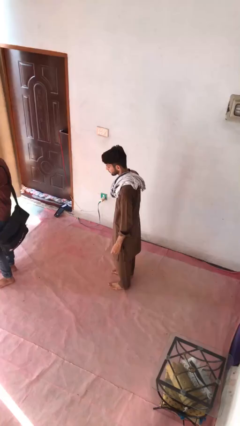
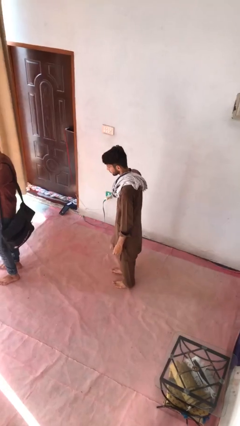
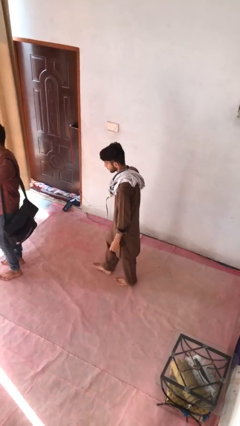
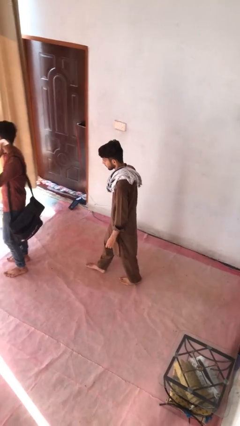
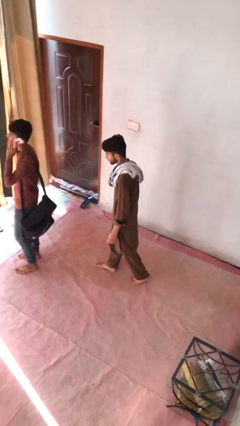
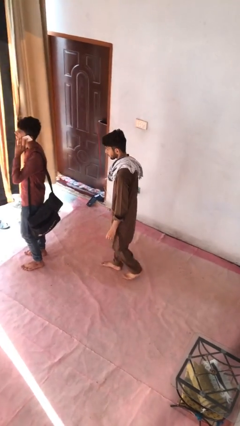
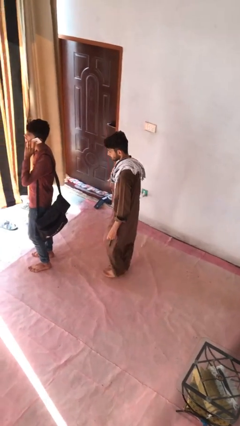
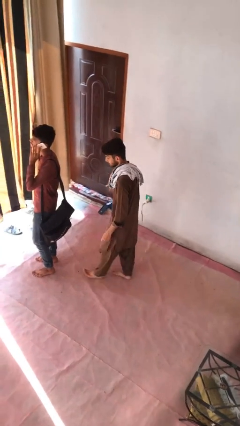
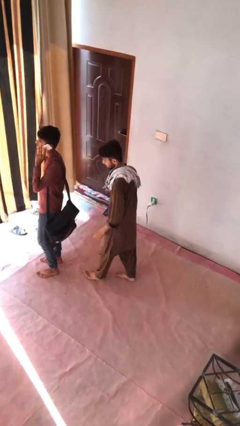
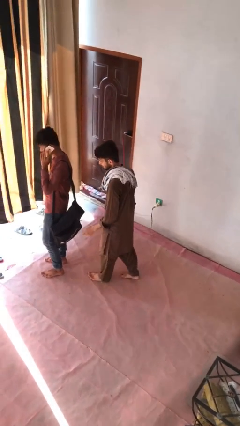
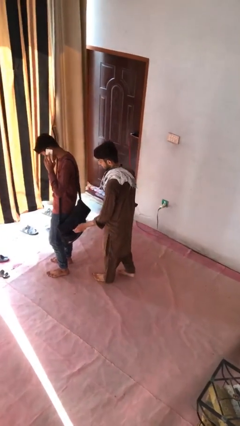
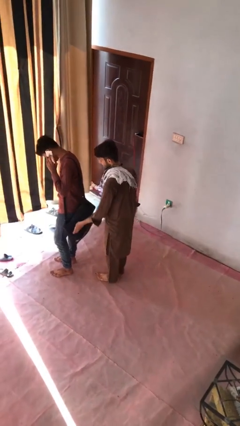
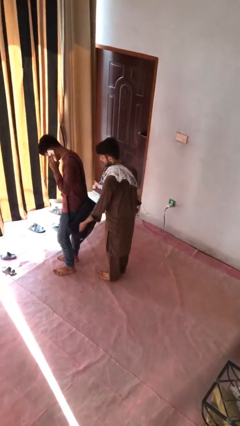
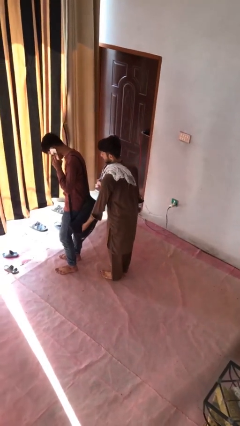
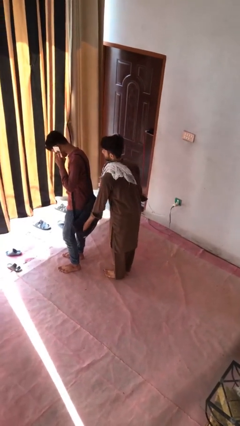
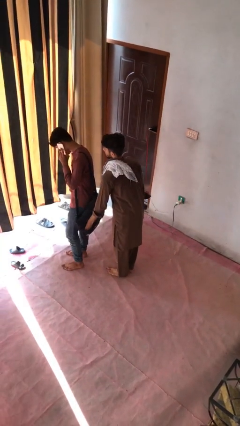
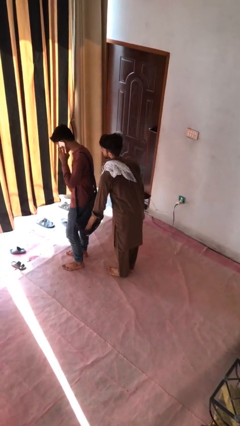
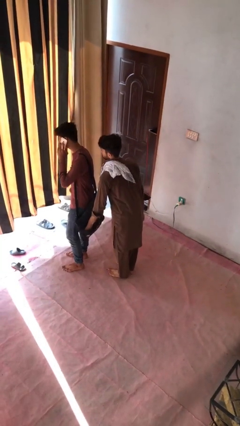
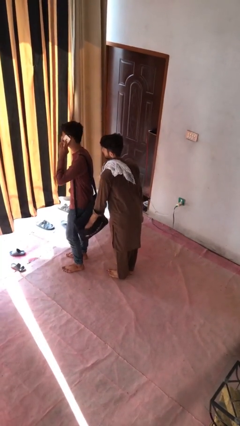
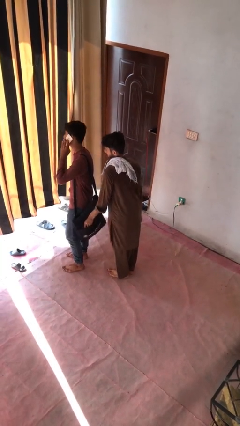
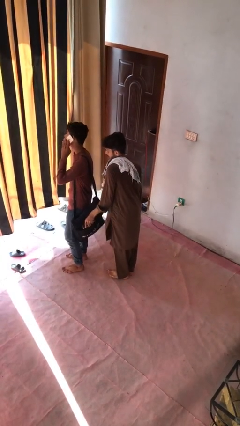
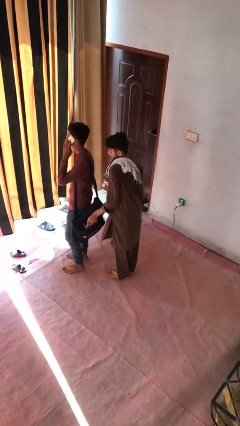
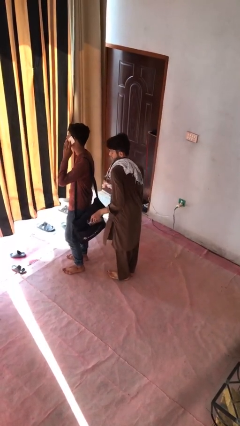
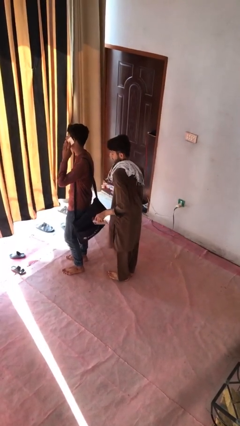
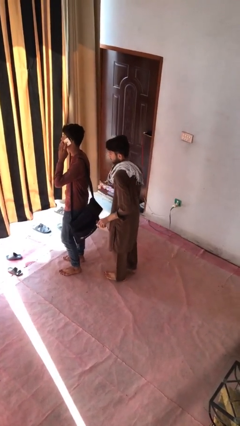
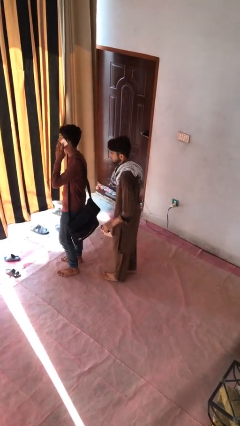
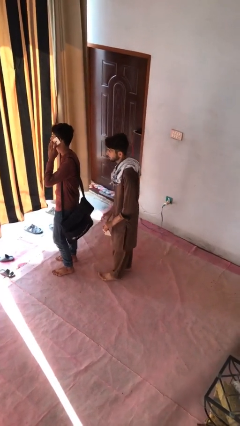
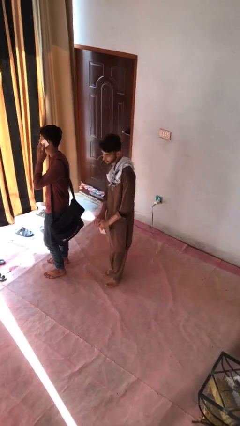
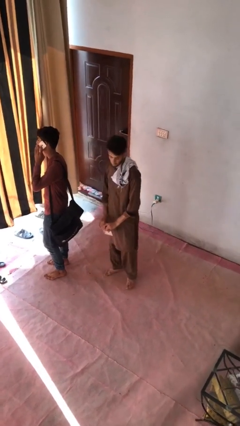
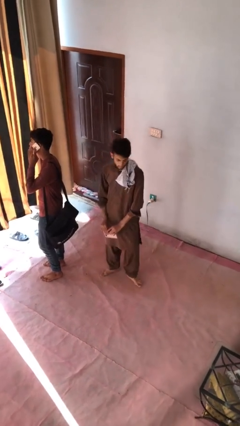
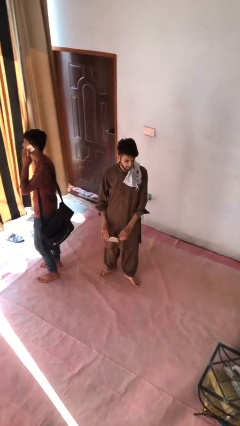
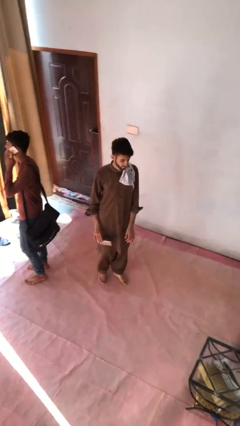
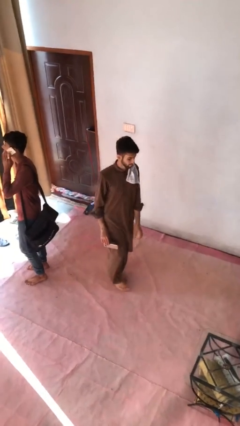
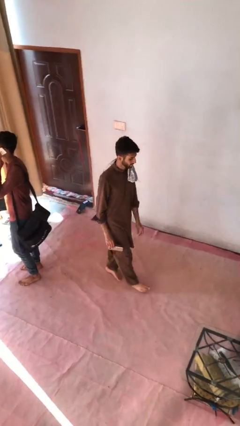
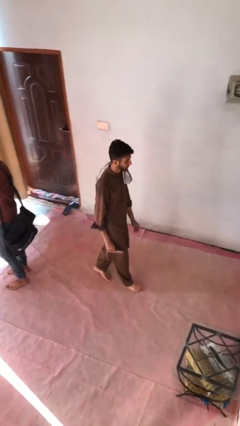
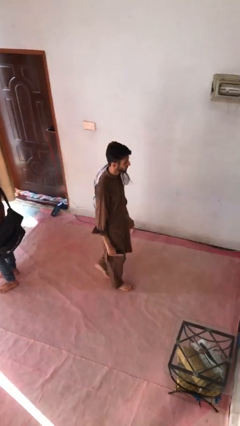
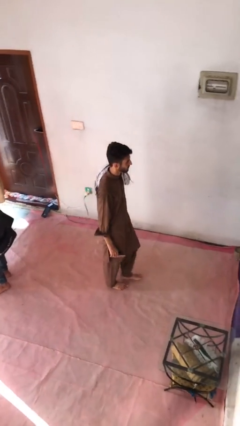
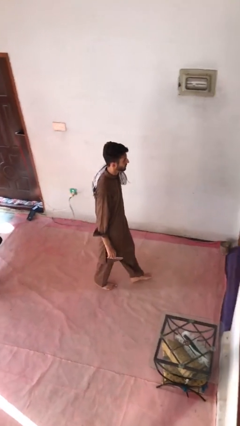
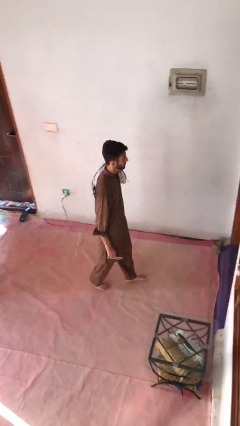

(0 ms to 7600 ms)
person steals object from person

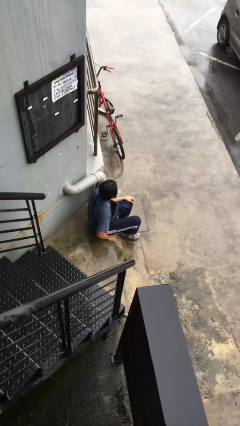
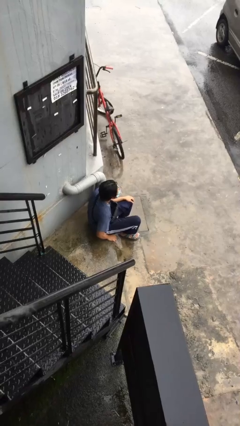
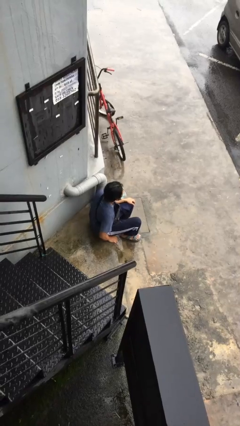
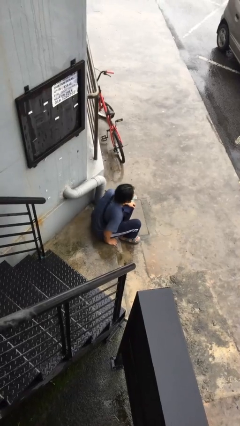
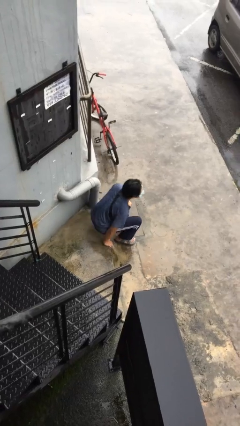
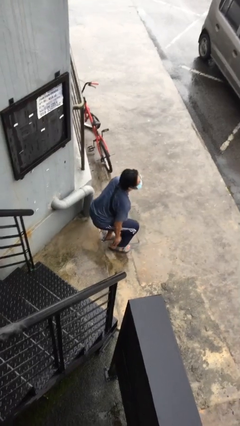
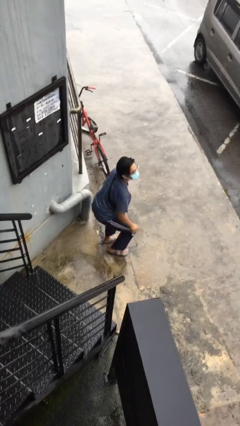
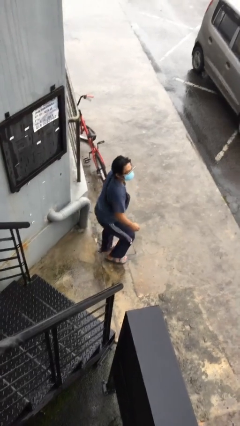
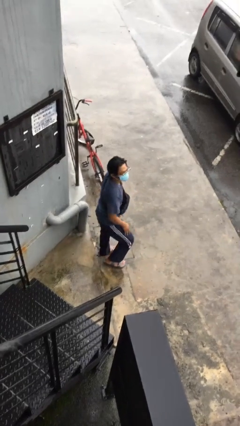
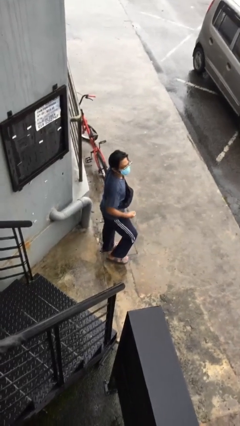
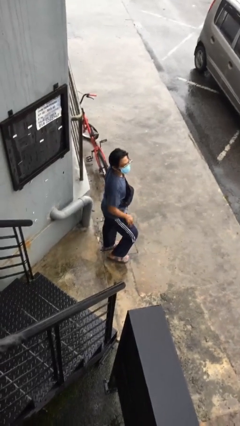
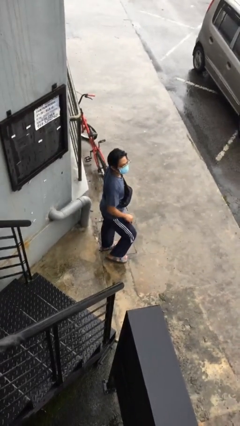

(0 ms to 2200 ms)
person stands up

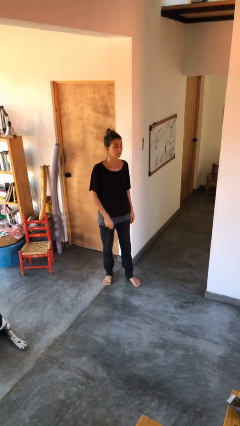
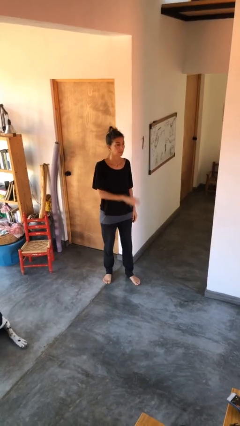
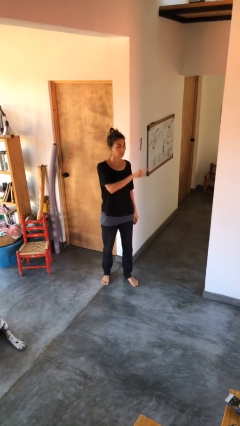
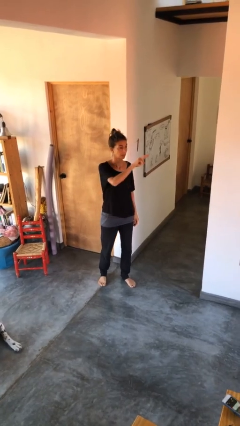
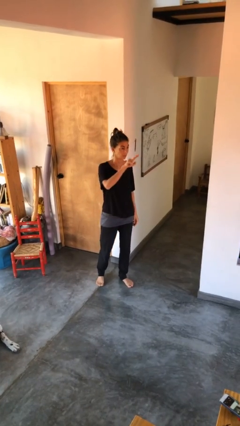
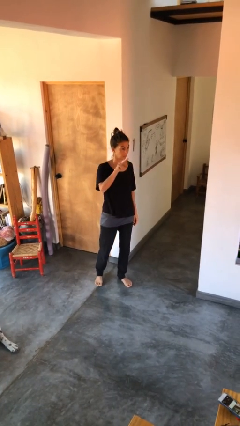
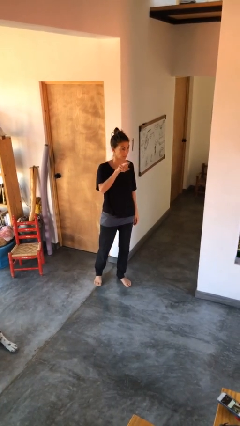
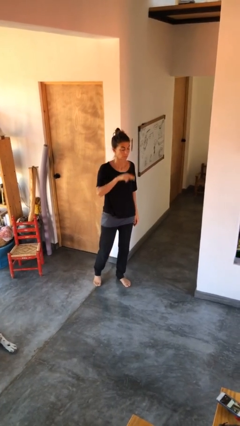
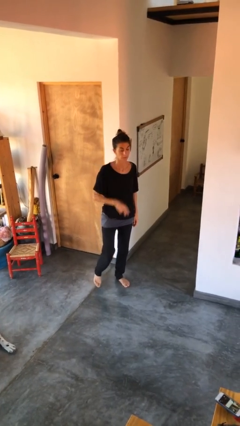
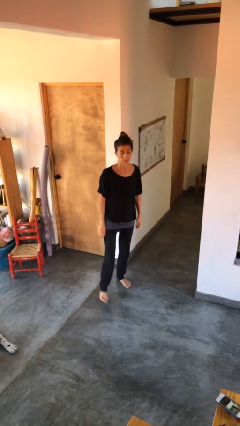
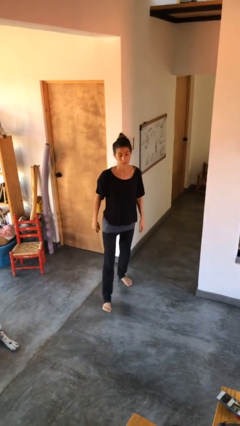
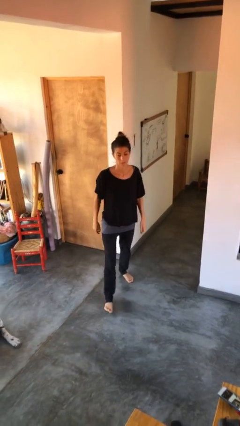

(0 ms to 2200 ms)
person gestures swipe right

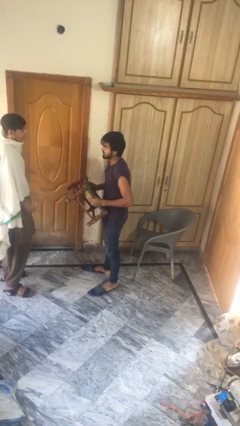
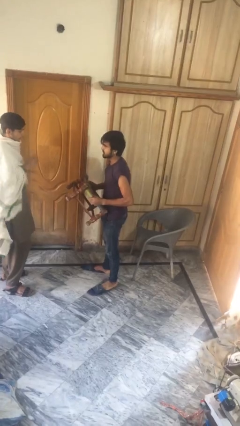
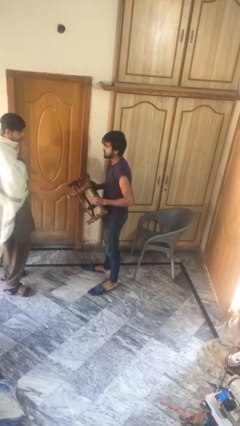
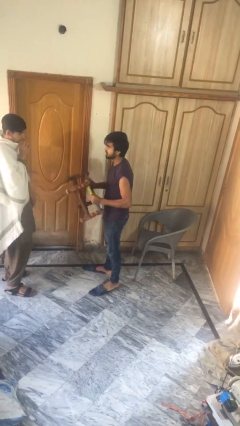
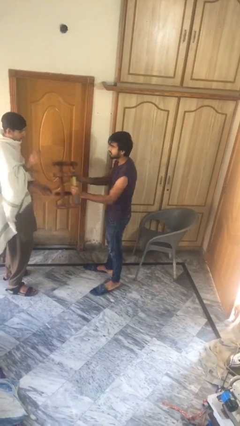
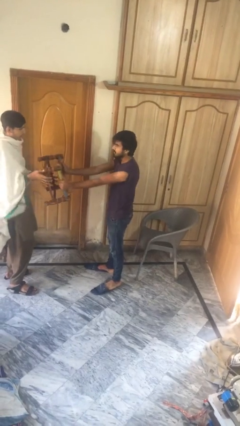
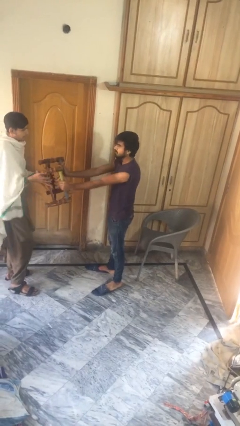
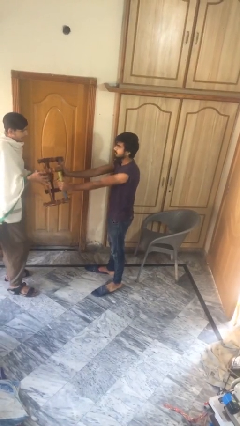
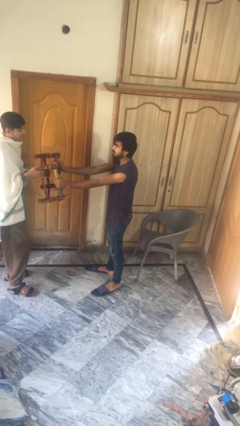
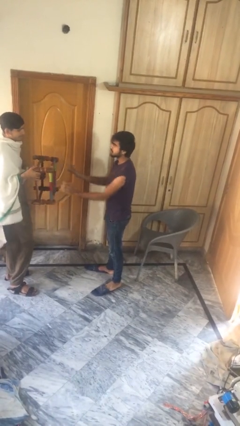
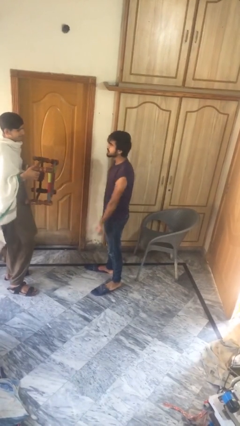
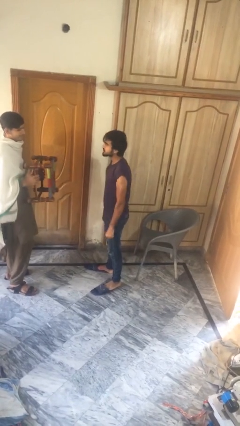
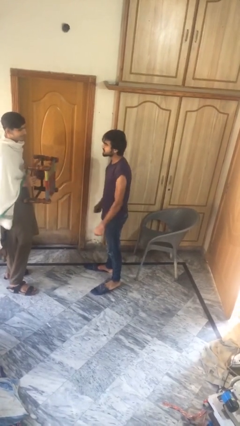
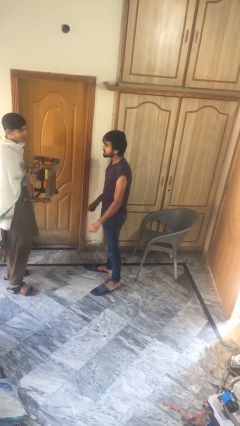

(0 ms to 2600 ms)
person transfers object to person

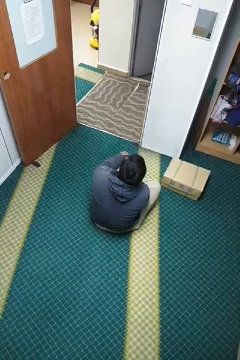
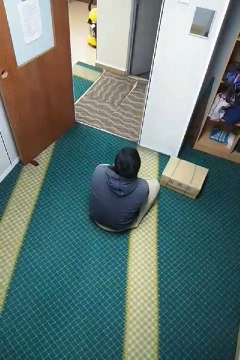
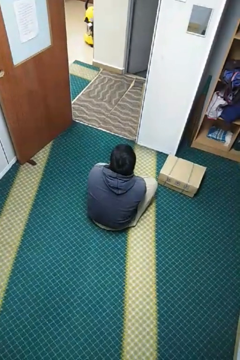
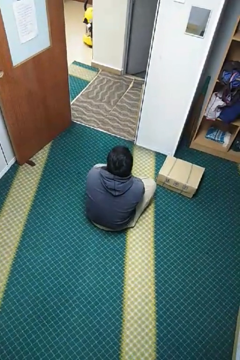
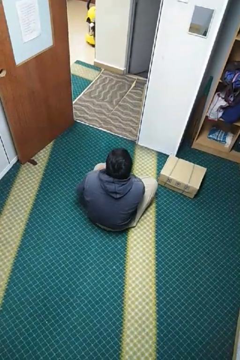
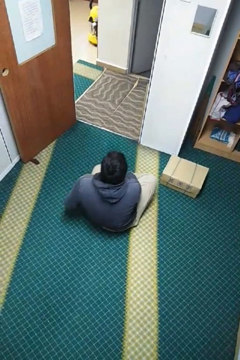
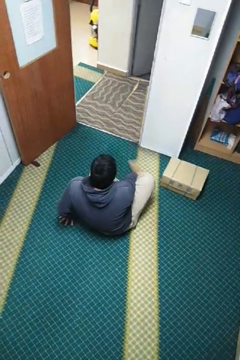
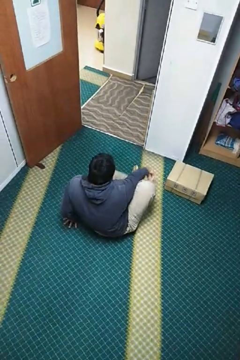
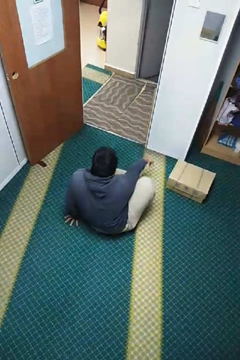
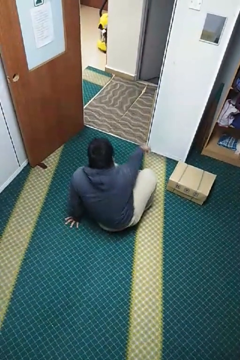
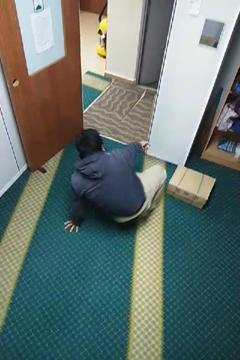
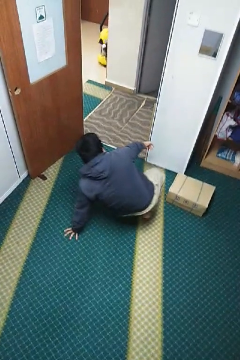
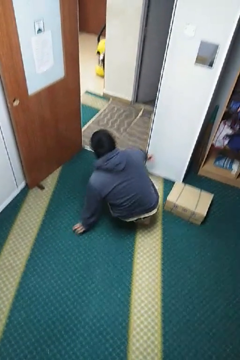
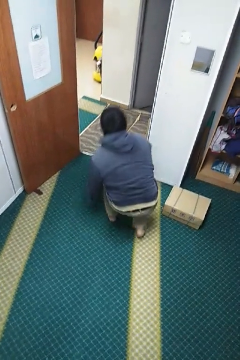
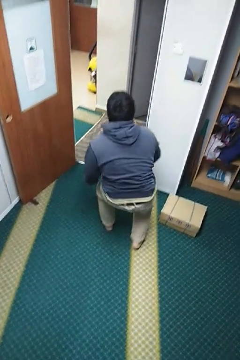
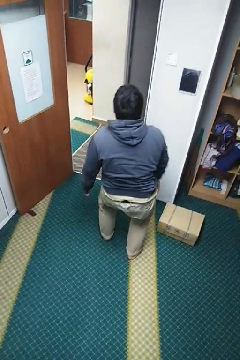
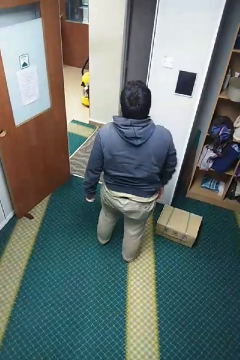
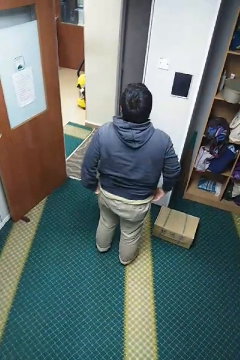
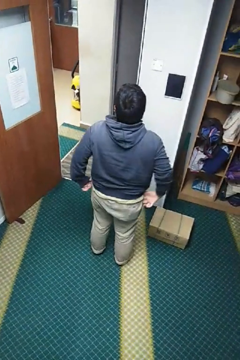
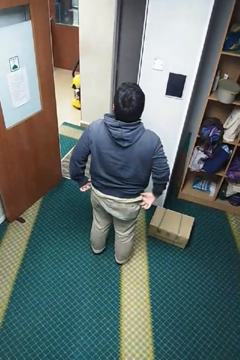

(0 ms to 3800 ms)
person stands up from floor

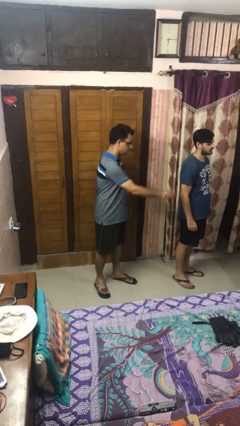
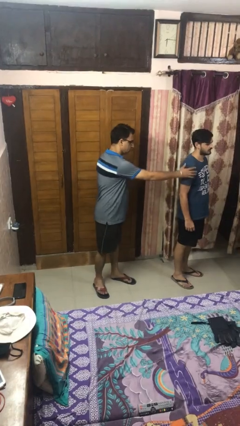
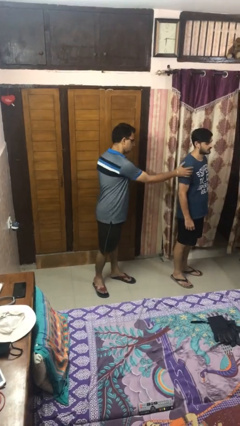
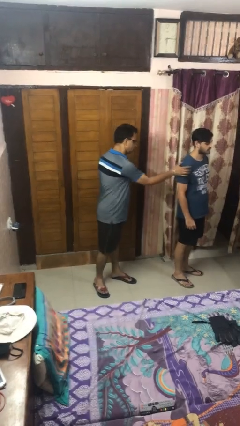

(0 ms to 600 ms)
person grabs person by shoulder
